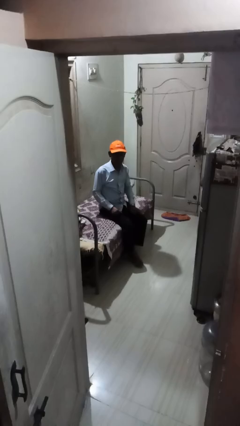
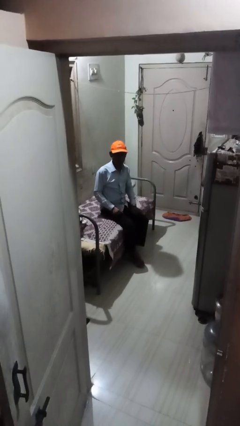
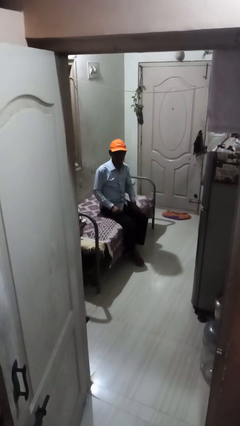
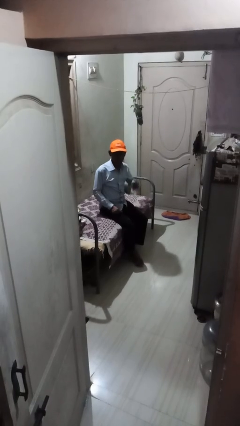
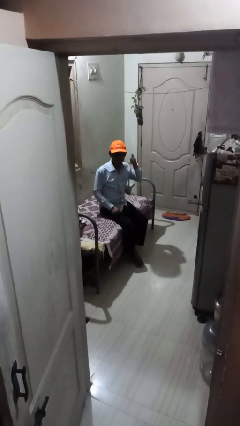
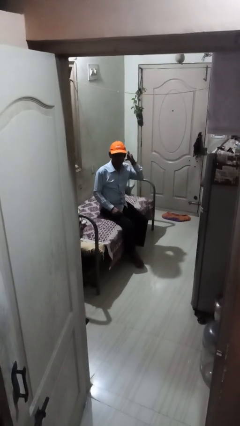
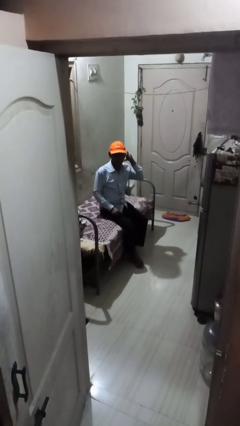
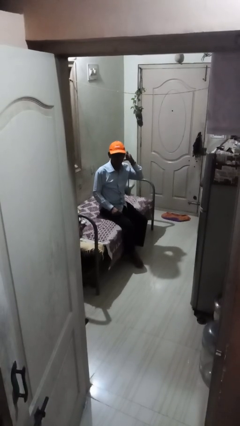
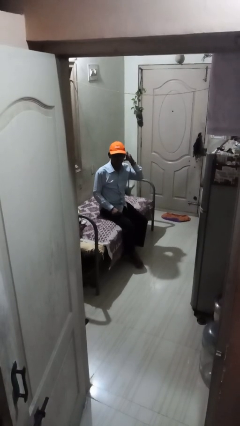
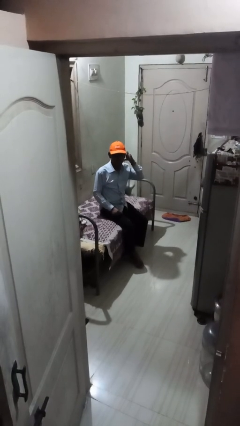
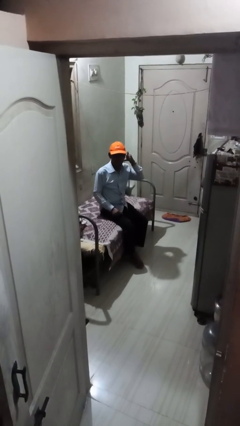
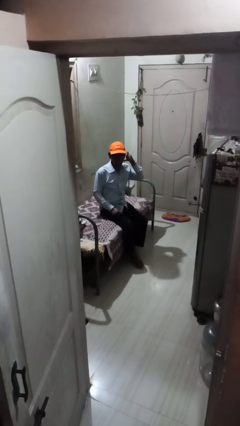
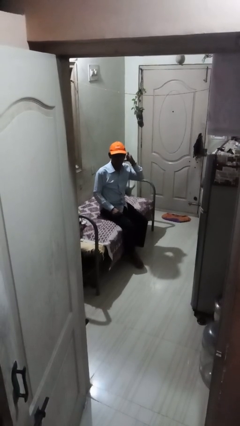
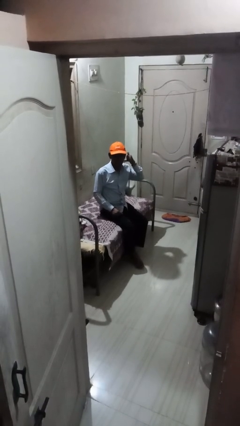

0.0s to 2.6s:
person gestures call me

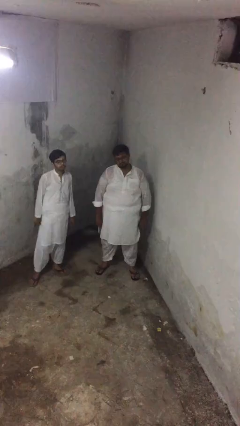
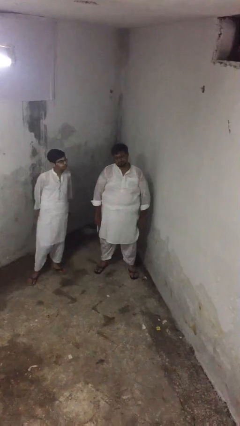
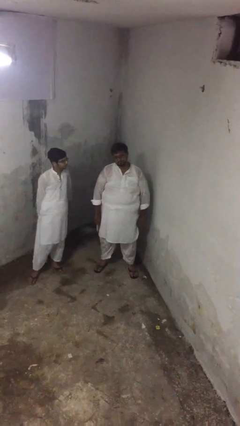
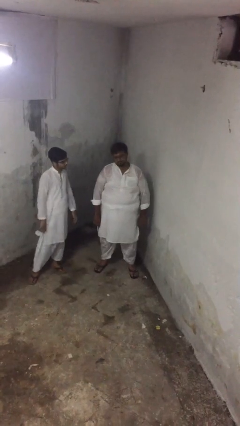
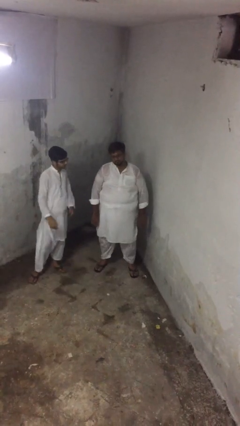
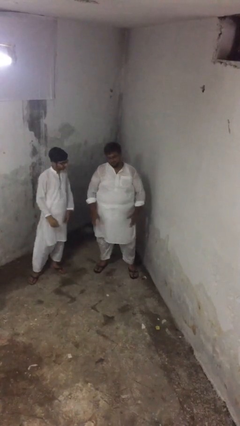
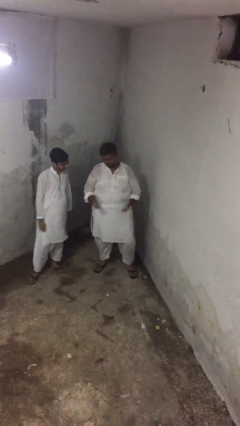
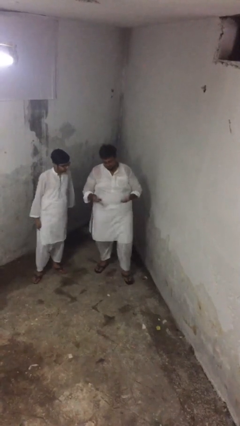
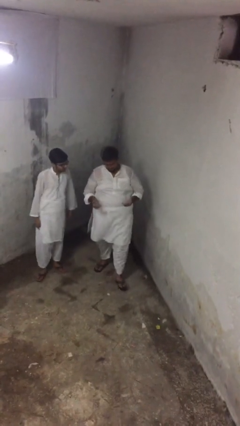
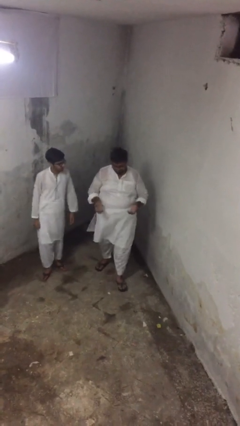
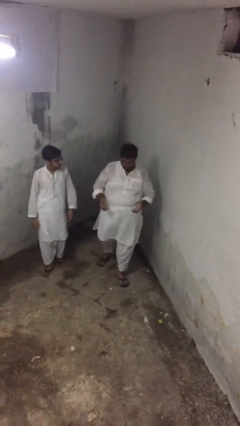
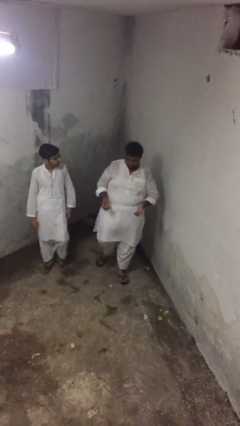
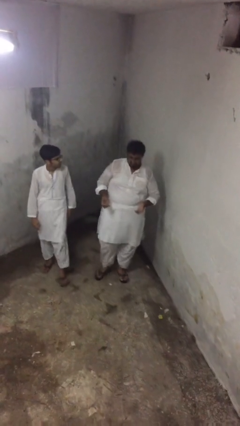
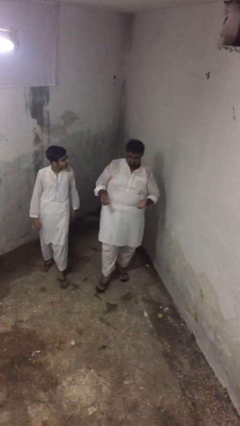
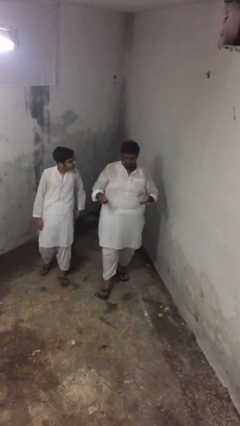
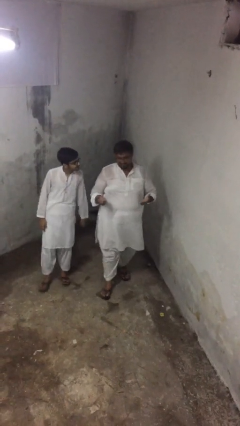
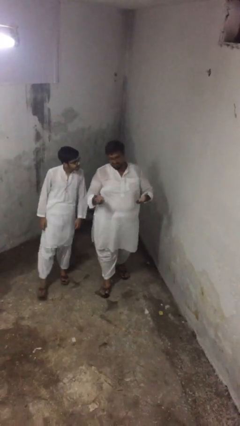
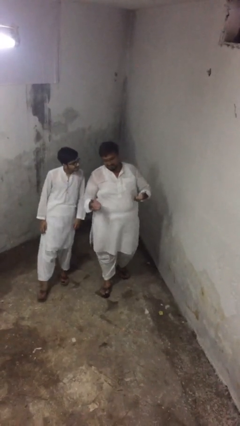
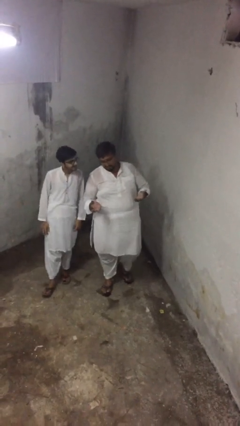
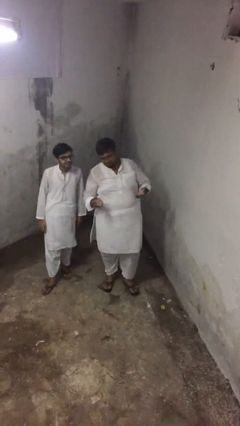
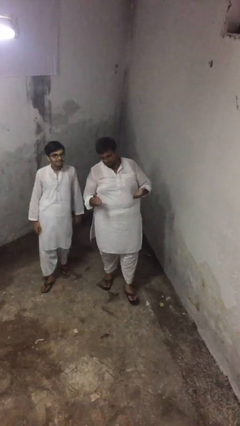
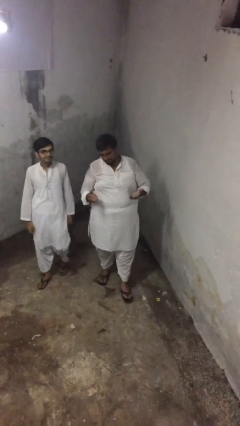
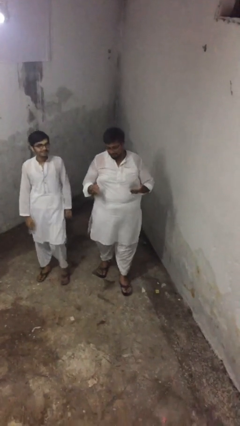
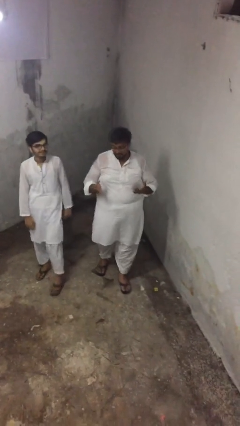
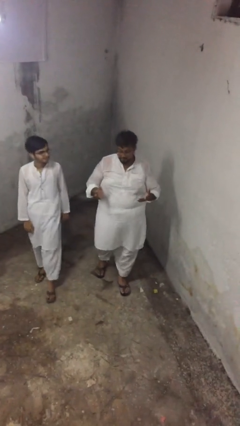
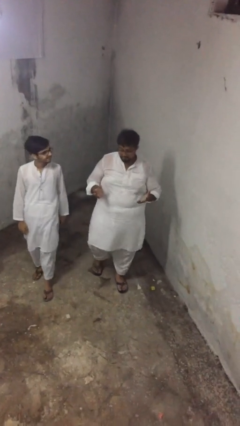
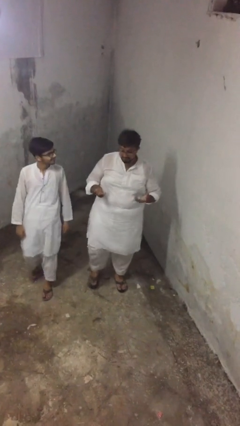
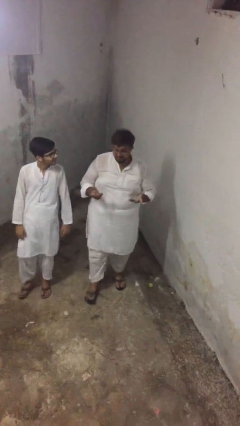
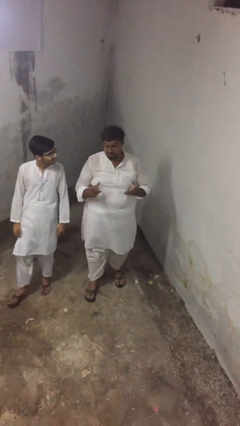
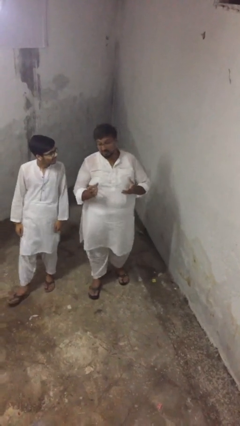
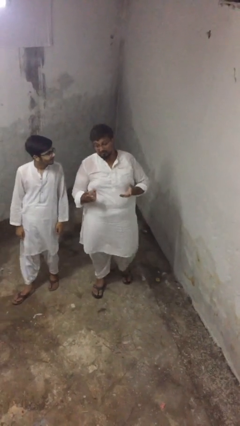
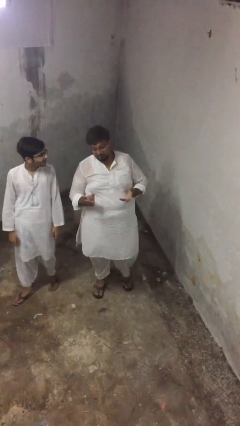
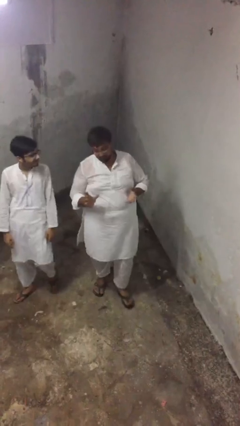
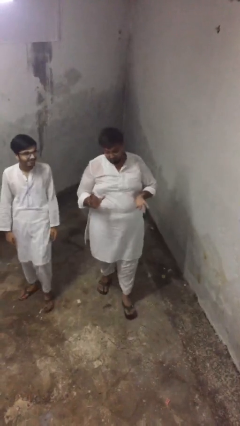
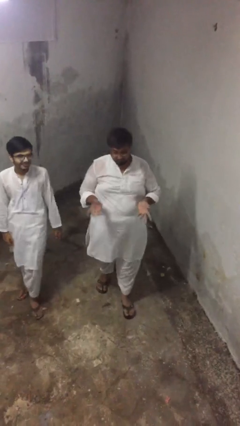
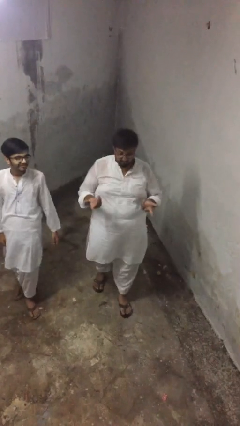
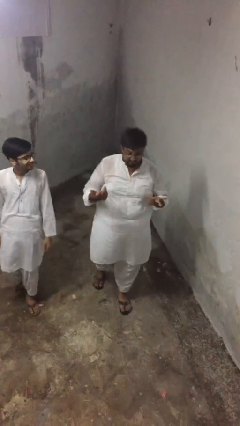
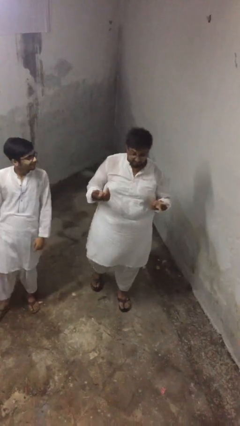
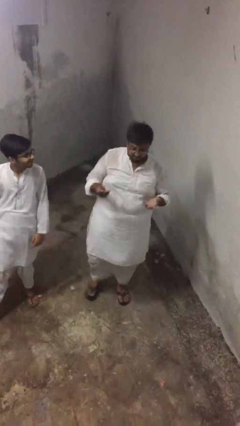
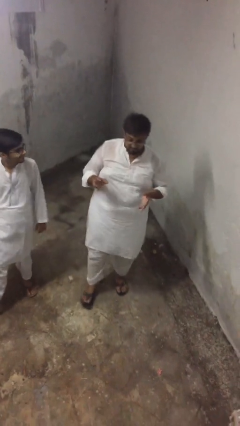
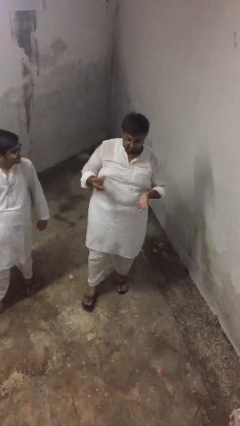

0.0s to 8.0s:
person talks to person

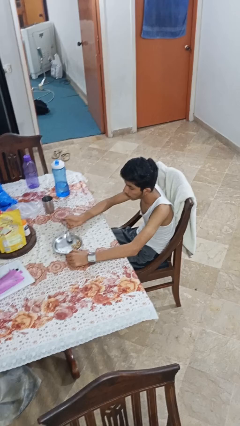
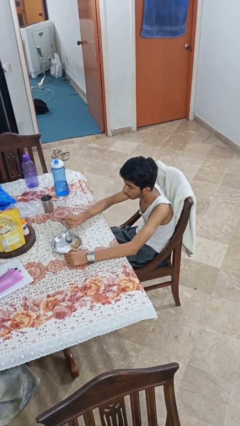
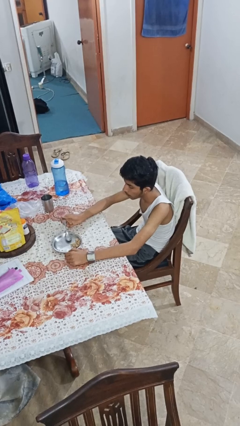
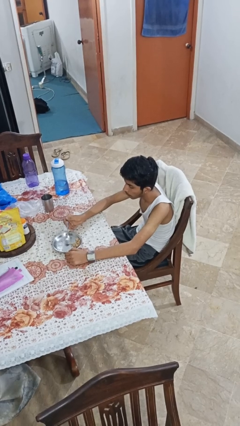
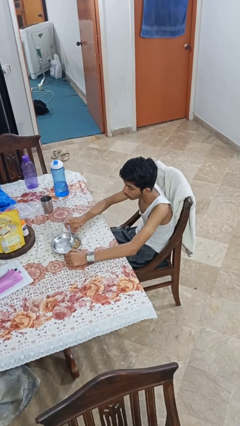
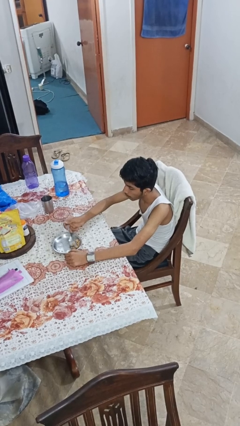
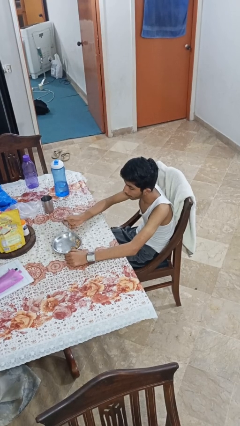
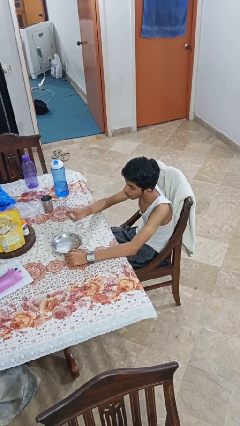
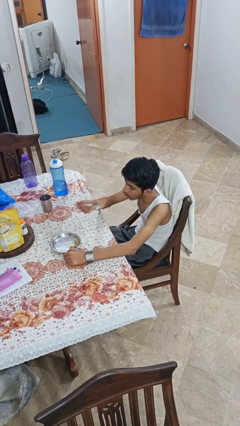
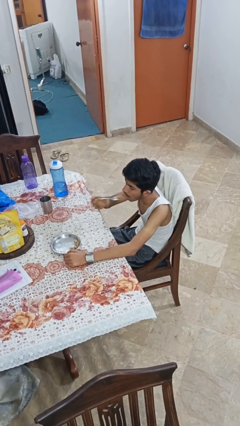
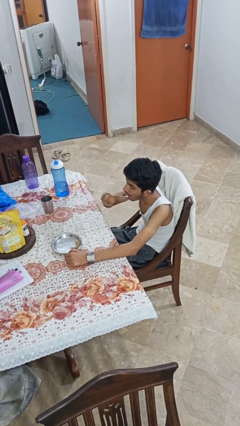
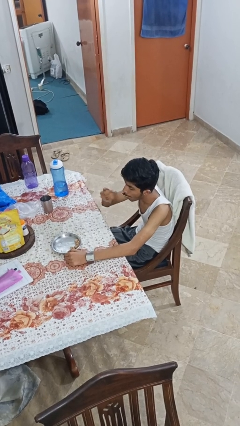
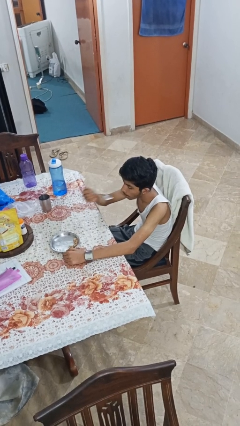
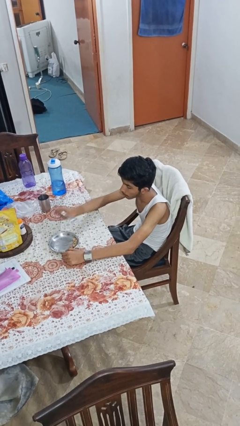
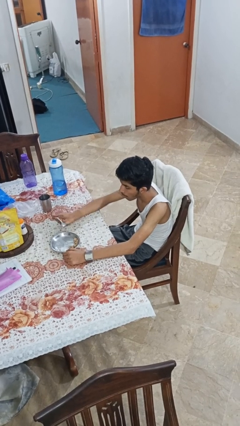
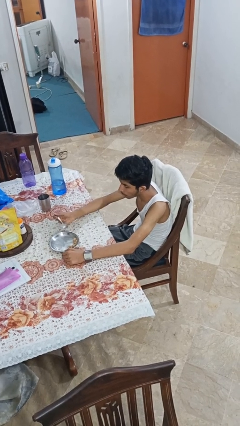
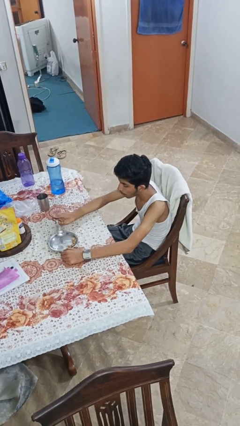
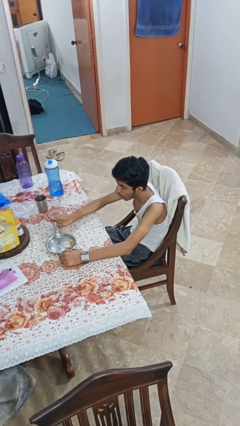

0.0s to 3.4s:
person eats with utensil

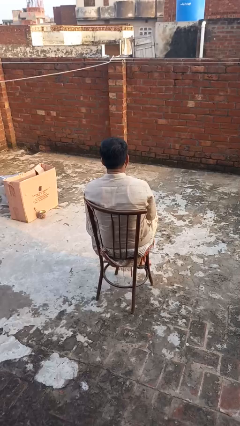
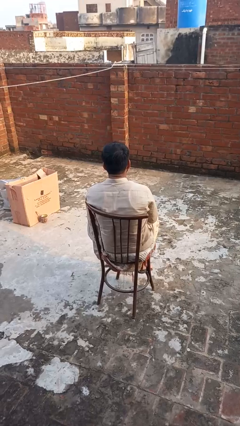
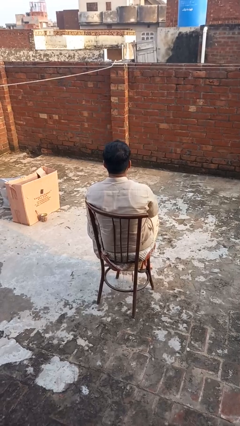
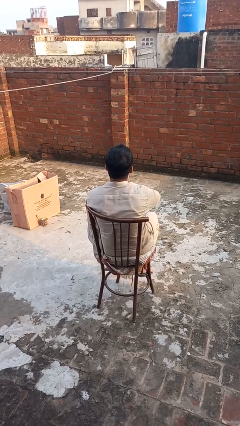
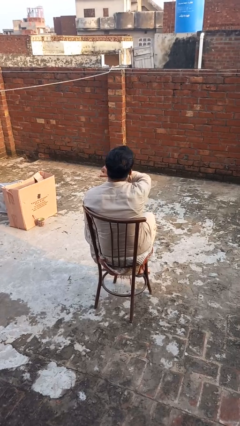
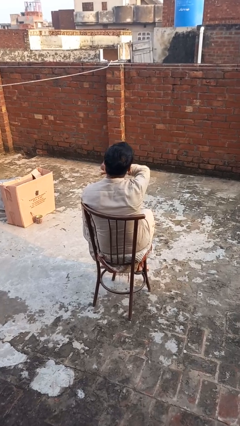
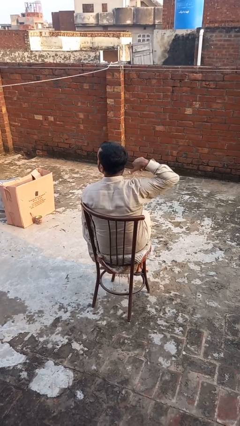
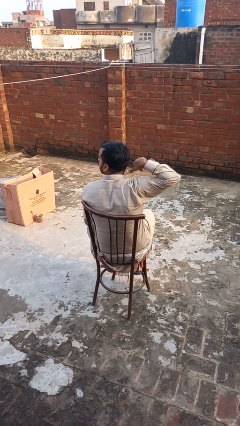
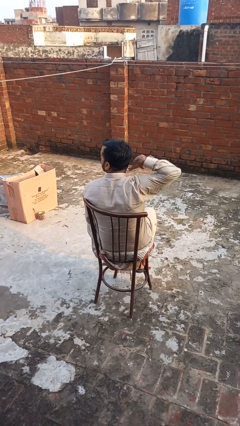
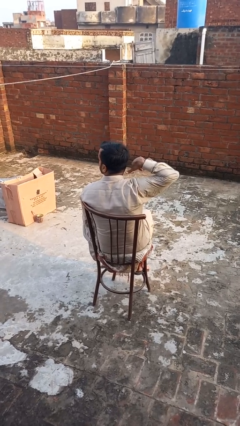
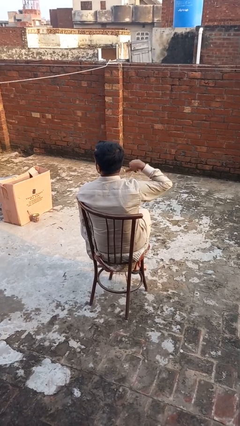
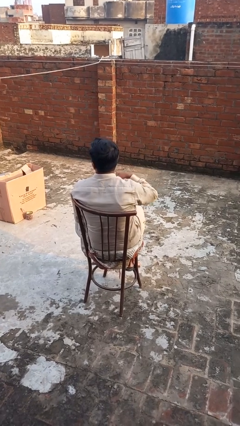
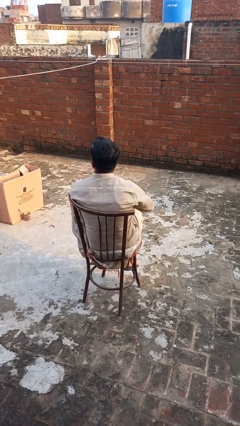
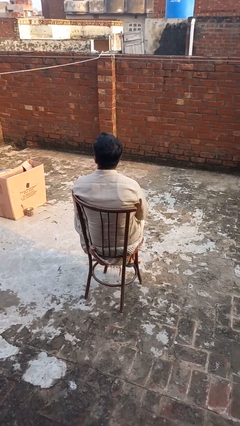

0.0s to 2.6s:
person gestures cut

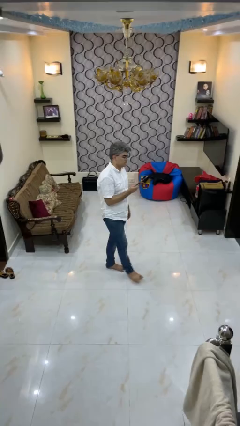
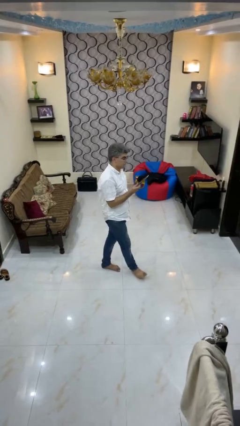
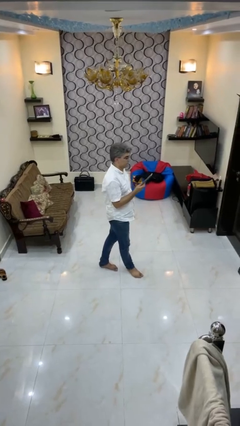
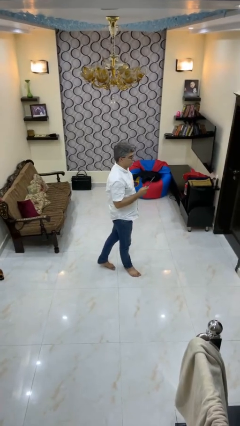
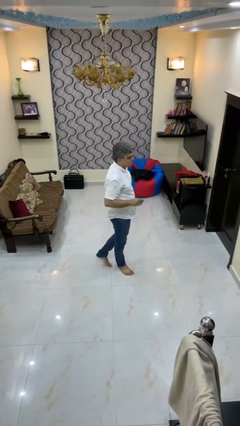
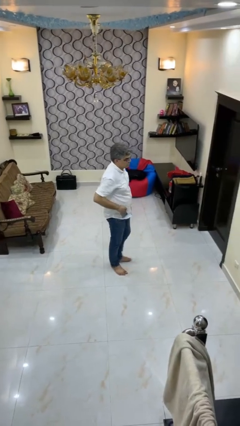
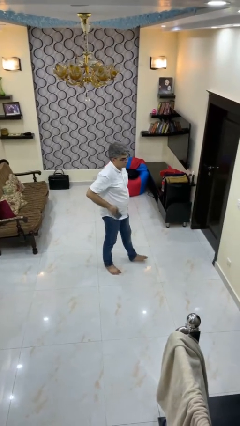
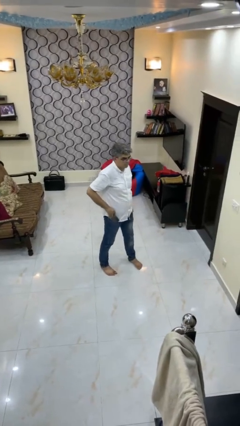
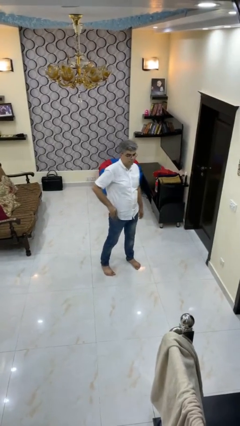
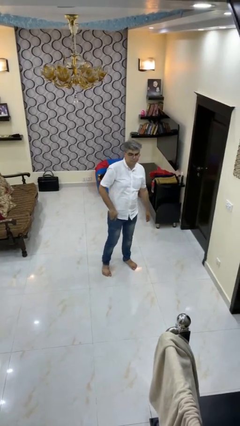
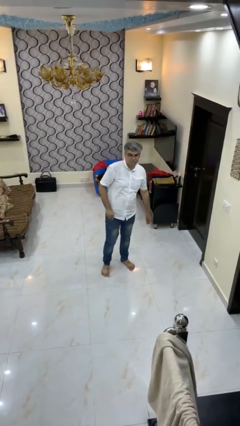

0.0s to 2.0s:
person puts phone into pocket
